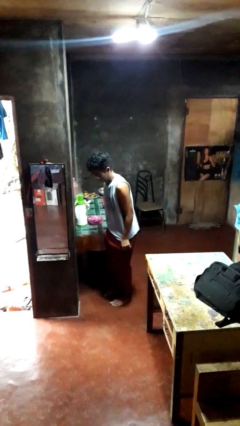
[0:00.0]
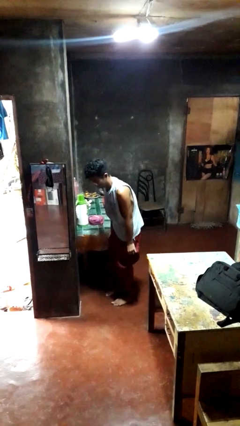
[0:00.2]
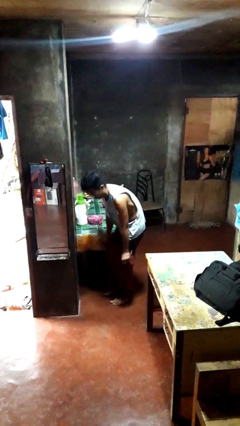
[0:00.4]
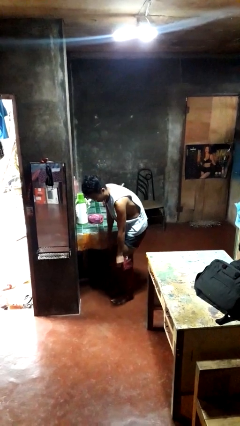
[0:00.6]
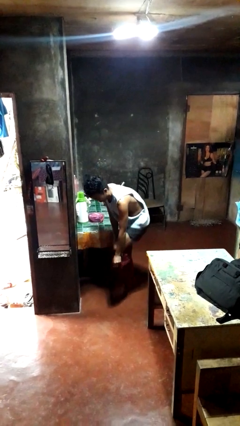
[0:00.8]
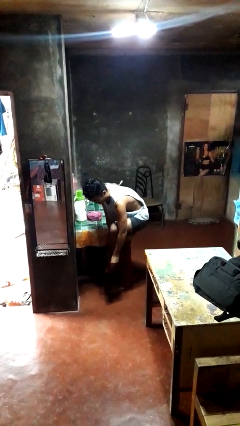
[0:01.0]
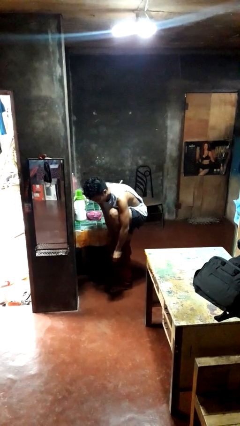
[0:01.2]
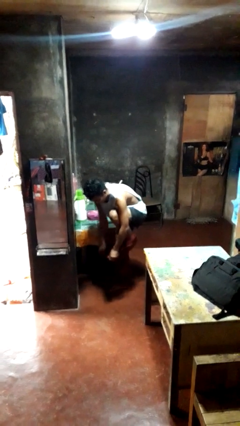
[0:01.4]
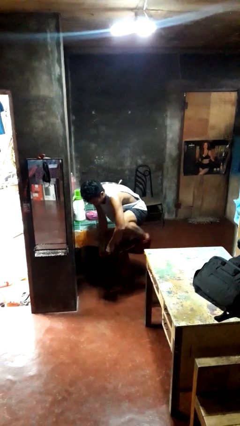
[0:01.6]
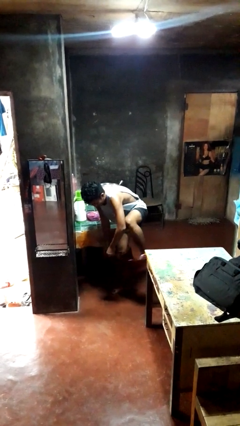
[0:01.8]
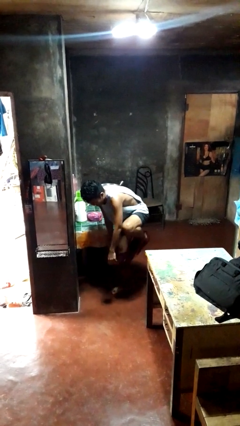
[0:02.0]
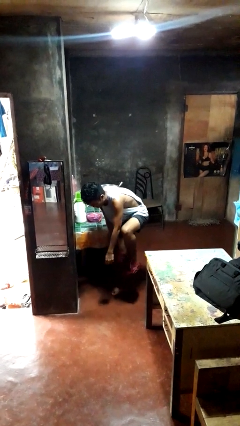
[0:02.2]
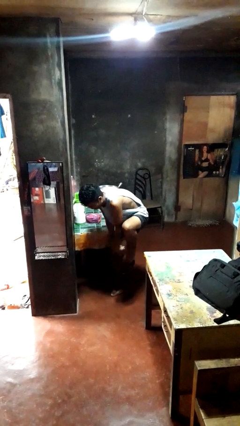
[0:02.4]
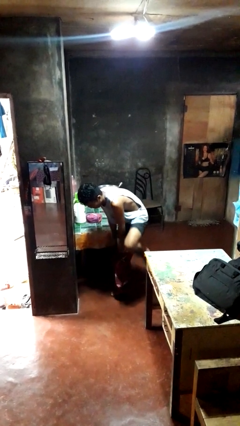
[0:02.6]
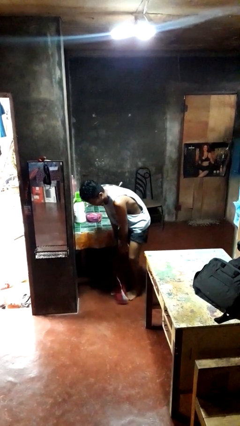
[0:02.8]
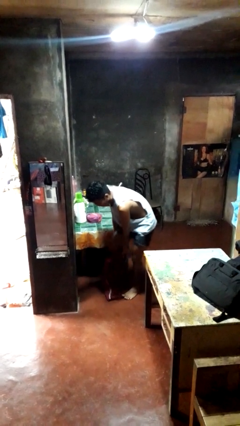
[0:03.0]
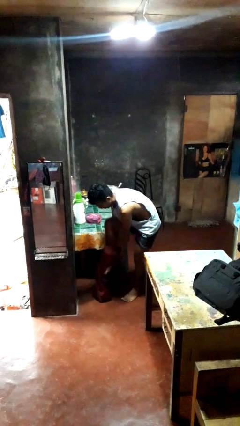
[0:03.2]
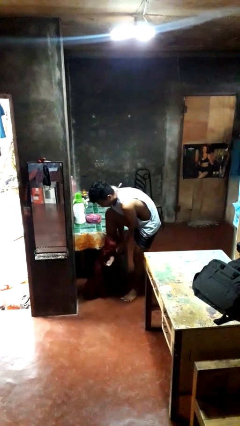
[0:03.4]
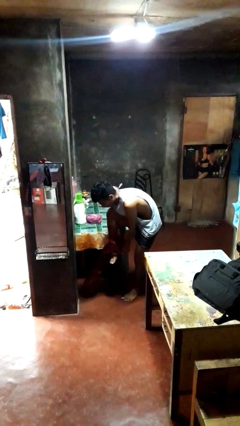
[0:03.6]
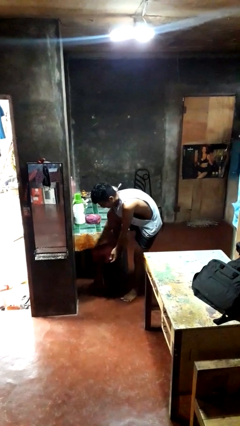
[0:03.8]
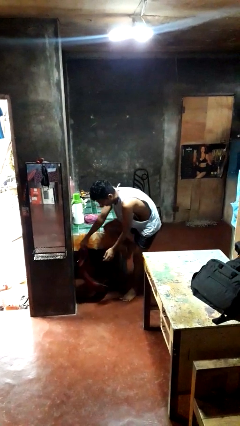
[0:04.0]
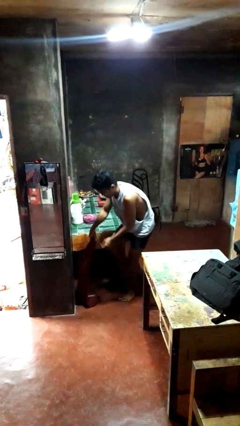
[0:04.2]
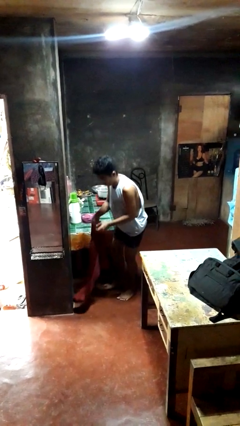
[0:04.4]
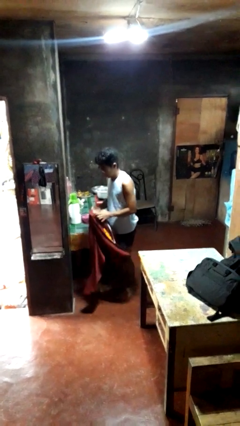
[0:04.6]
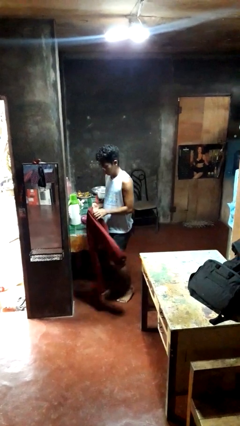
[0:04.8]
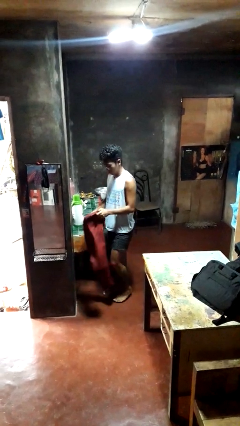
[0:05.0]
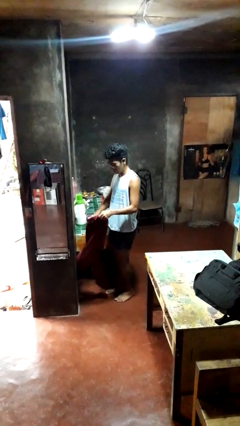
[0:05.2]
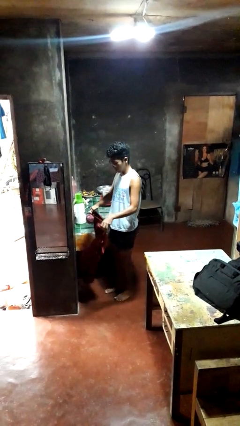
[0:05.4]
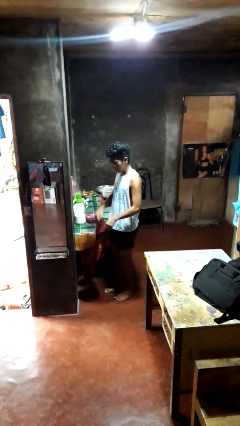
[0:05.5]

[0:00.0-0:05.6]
person takes off pants

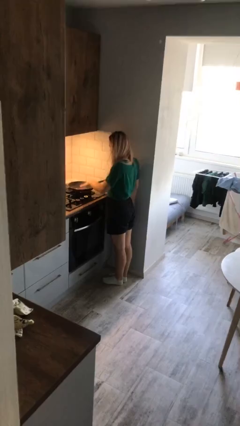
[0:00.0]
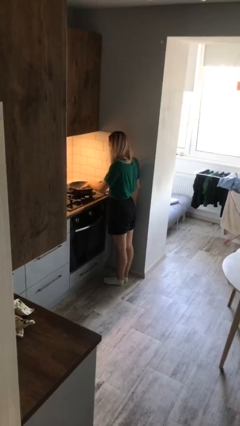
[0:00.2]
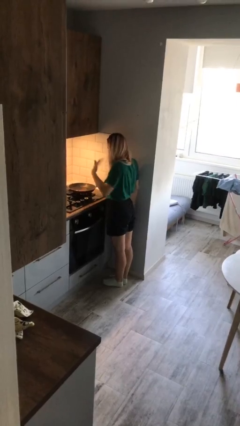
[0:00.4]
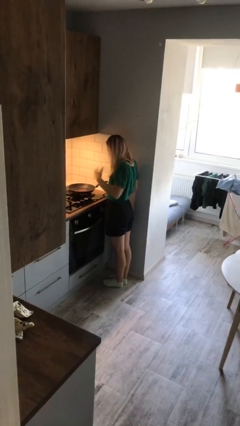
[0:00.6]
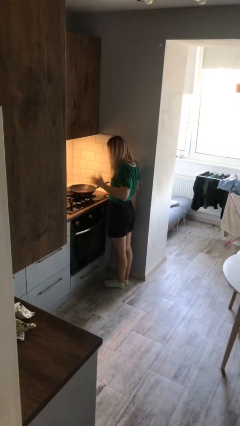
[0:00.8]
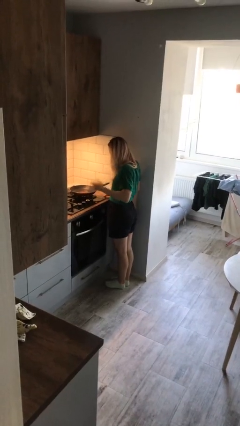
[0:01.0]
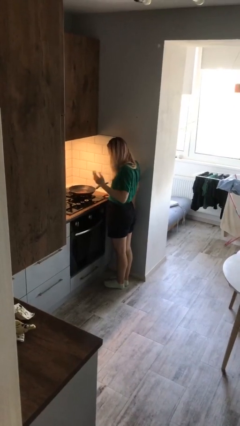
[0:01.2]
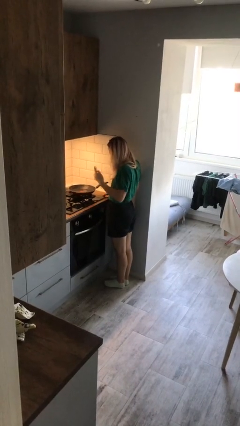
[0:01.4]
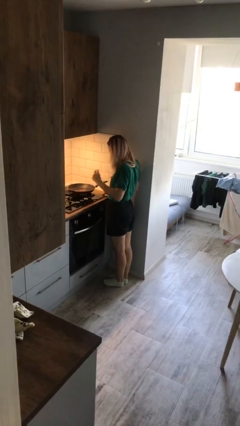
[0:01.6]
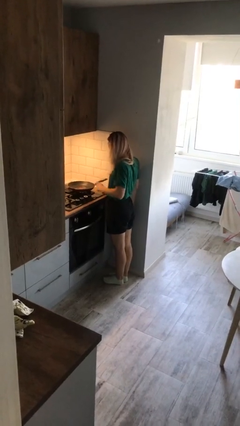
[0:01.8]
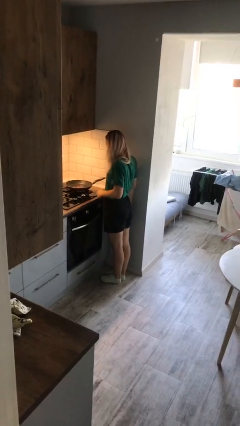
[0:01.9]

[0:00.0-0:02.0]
person burns hand

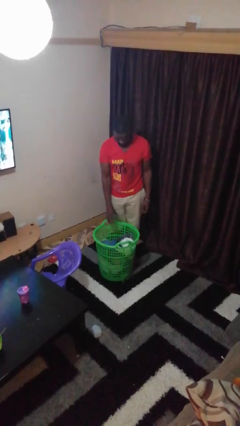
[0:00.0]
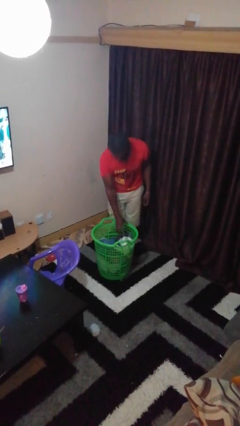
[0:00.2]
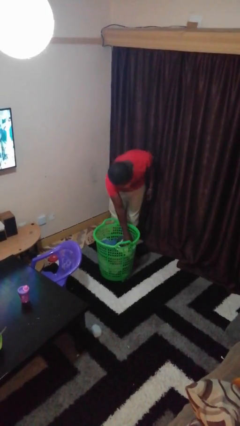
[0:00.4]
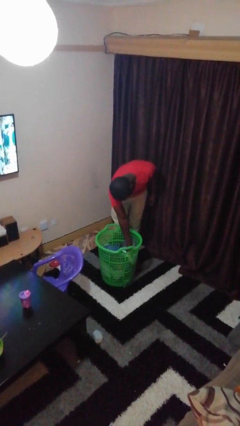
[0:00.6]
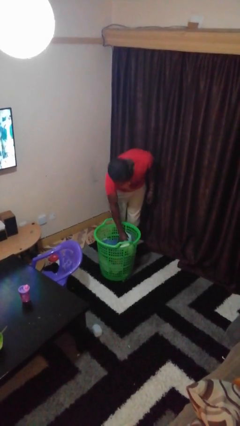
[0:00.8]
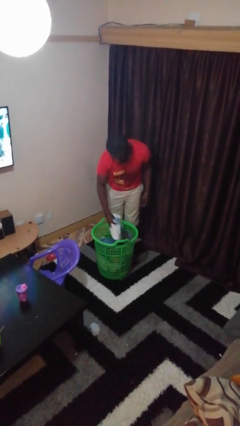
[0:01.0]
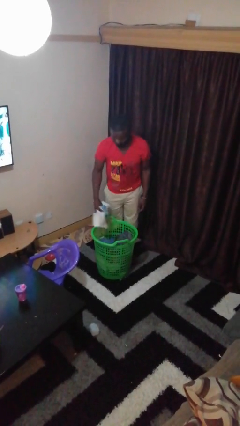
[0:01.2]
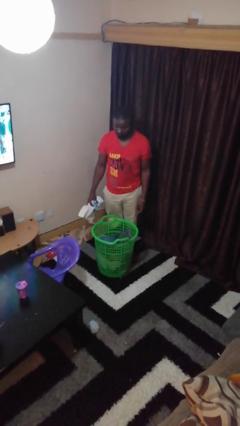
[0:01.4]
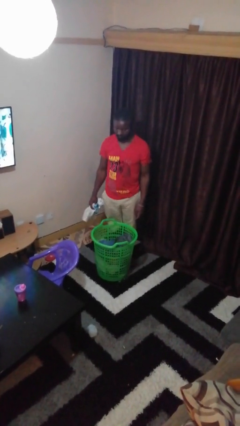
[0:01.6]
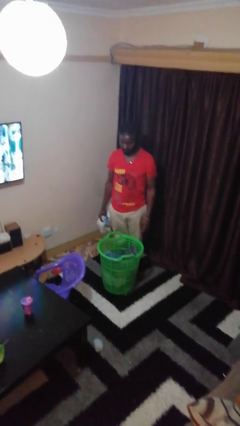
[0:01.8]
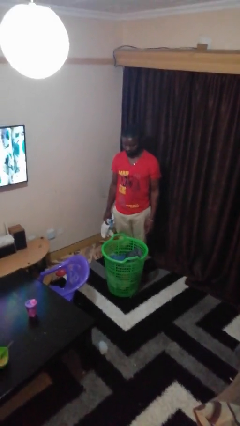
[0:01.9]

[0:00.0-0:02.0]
person takes object from basket

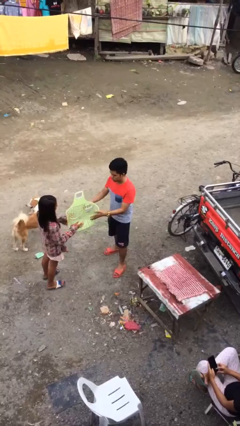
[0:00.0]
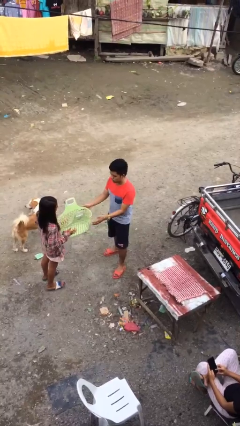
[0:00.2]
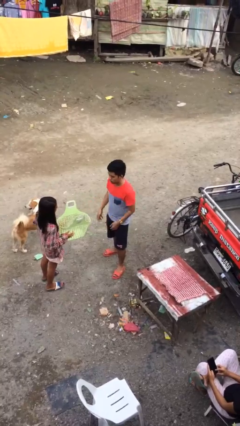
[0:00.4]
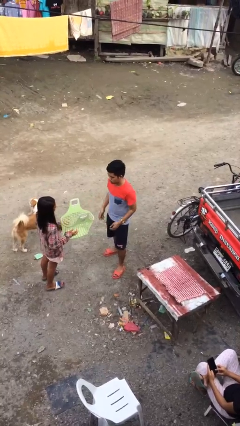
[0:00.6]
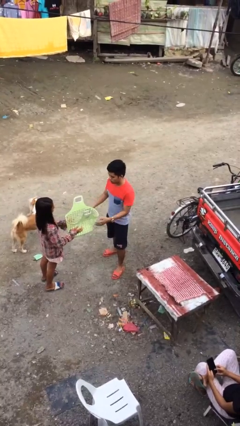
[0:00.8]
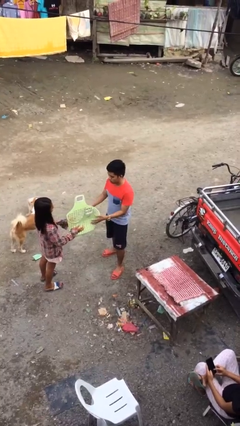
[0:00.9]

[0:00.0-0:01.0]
person transfers object to person

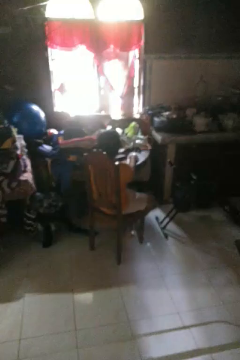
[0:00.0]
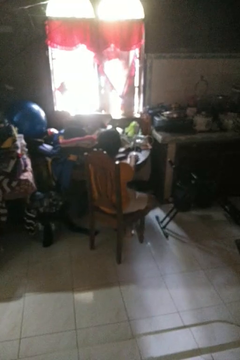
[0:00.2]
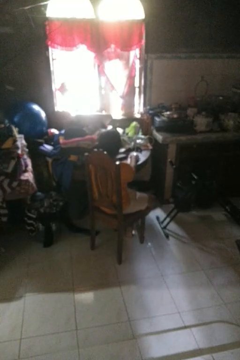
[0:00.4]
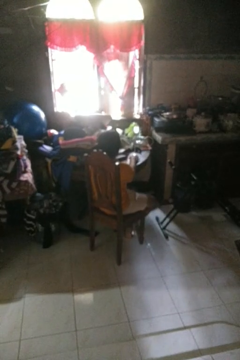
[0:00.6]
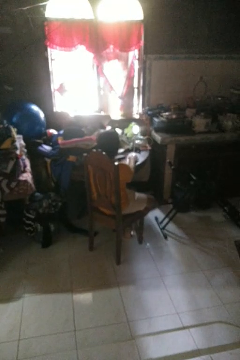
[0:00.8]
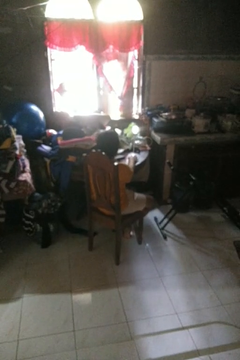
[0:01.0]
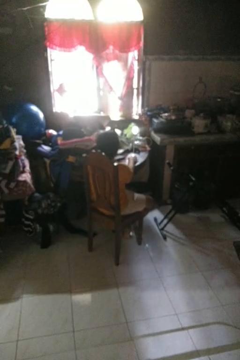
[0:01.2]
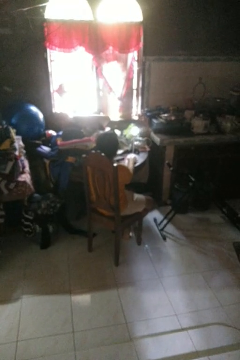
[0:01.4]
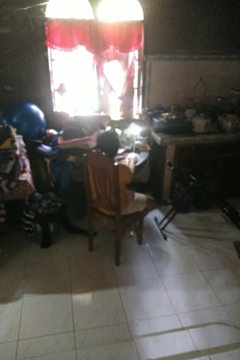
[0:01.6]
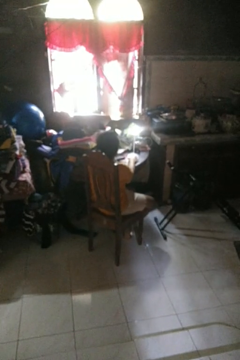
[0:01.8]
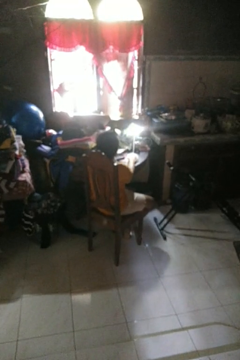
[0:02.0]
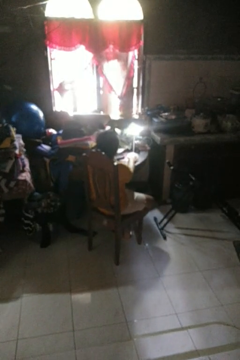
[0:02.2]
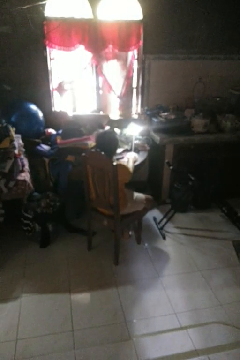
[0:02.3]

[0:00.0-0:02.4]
person turns on lamp

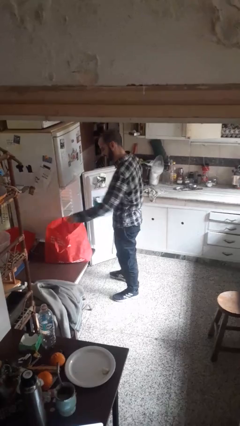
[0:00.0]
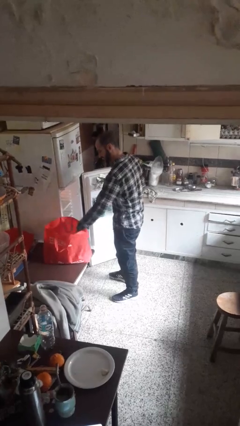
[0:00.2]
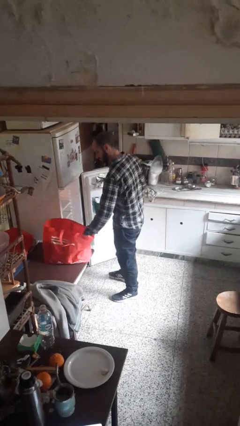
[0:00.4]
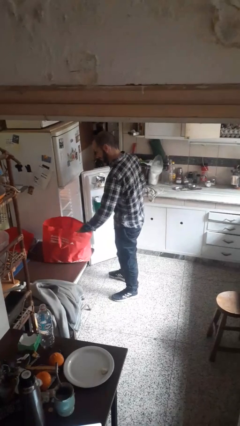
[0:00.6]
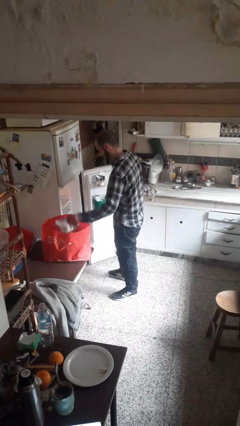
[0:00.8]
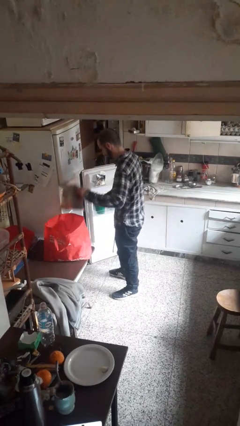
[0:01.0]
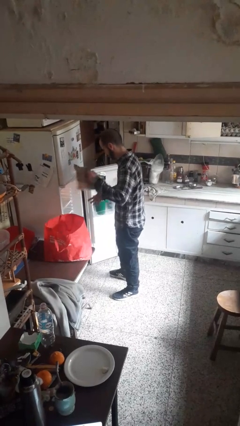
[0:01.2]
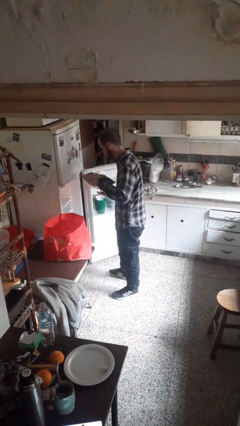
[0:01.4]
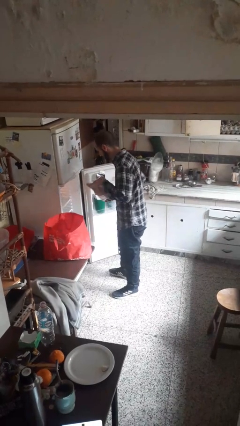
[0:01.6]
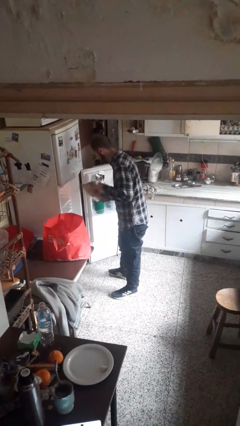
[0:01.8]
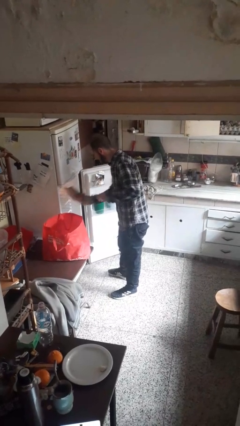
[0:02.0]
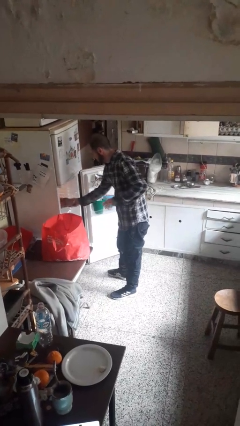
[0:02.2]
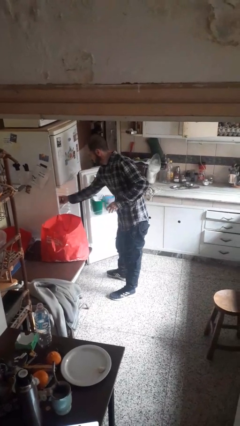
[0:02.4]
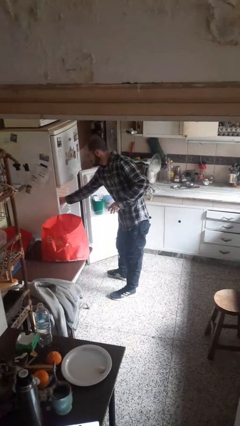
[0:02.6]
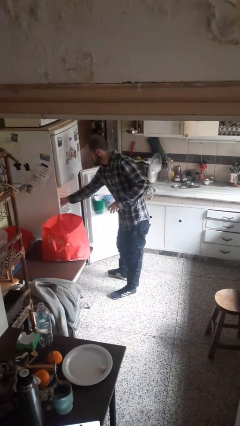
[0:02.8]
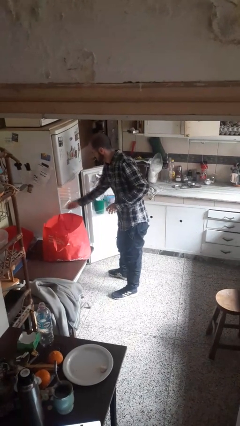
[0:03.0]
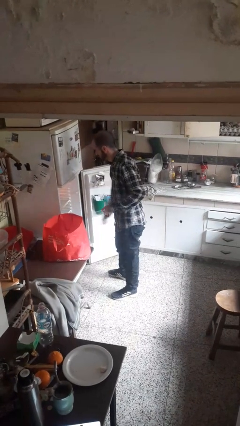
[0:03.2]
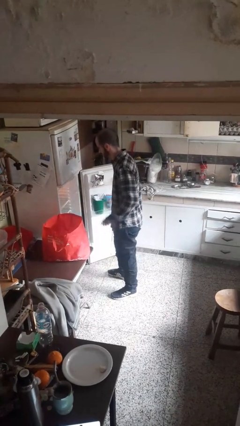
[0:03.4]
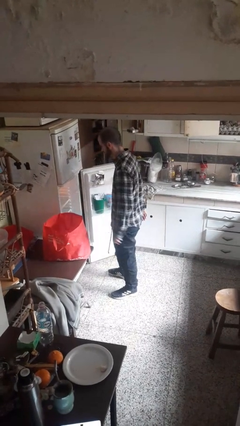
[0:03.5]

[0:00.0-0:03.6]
person loads groceries into refrigerator

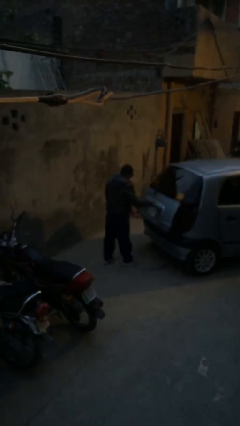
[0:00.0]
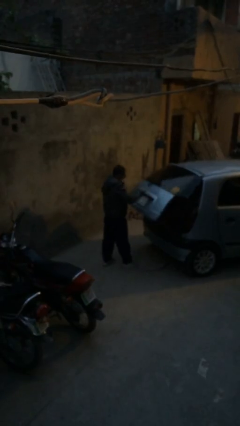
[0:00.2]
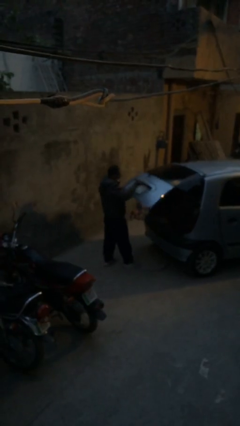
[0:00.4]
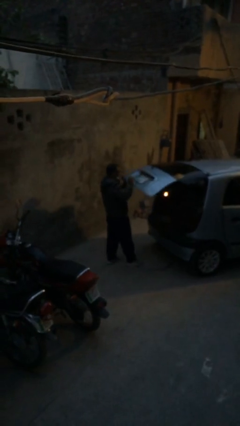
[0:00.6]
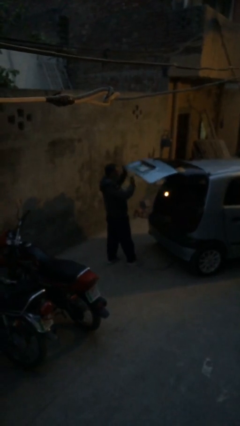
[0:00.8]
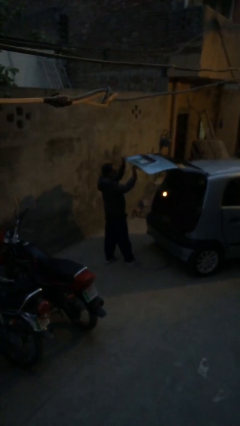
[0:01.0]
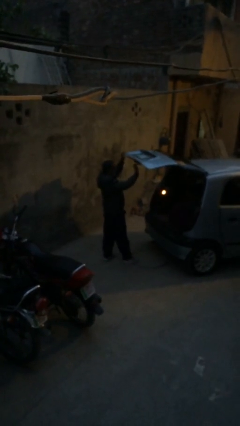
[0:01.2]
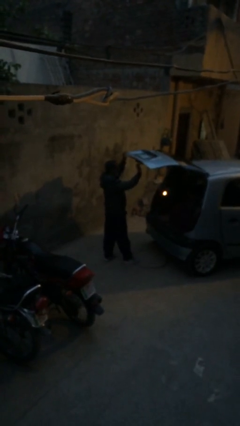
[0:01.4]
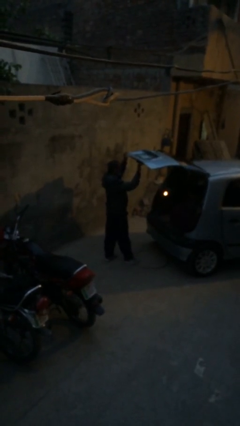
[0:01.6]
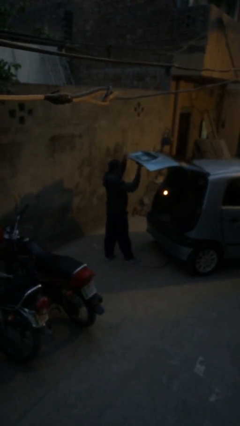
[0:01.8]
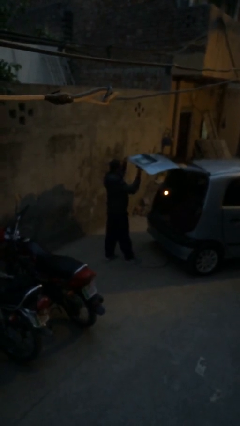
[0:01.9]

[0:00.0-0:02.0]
person opens car trunk
